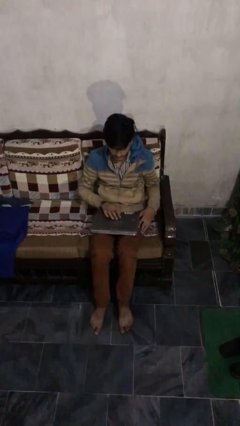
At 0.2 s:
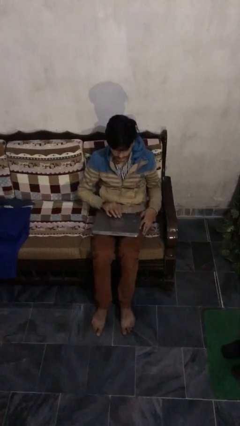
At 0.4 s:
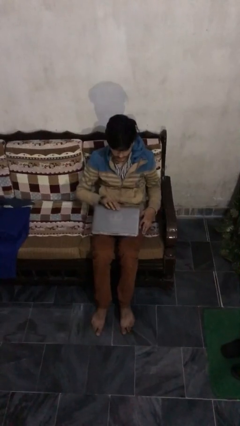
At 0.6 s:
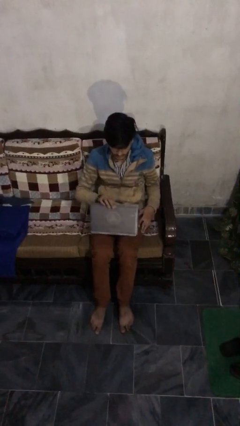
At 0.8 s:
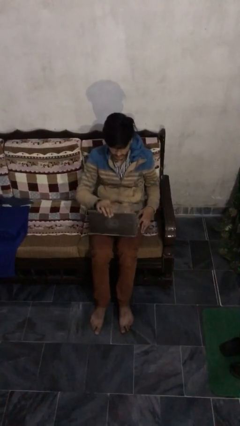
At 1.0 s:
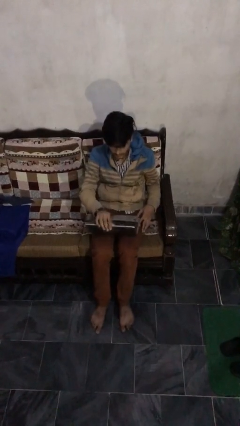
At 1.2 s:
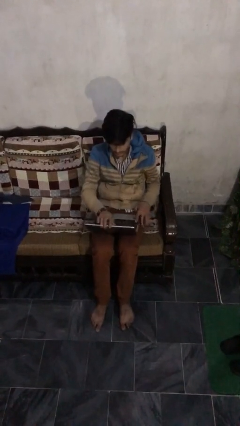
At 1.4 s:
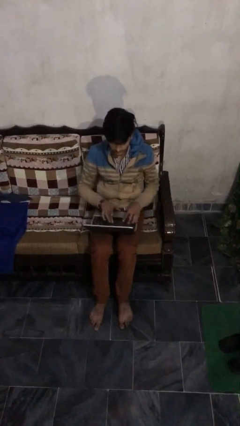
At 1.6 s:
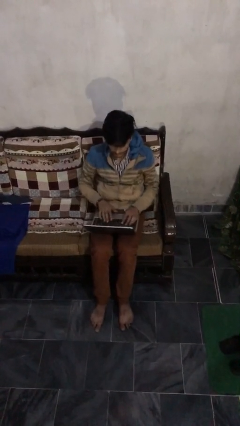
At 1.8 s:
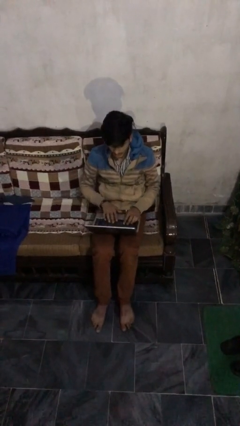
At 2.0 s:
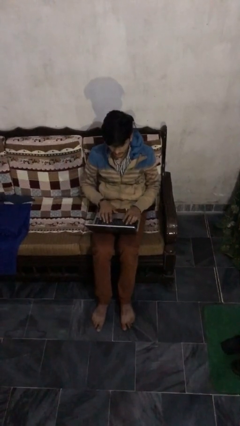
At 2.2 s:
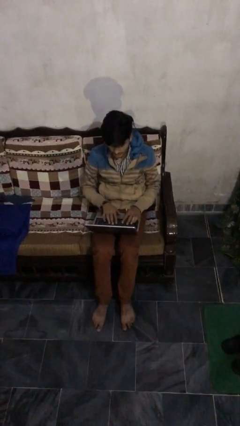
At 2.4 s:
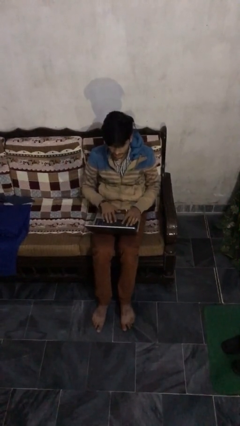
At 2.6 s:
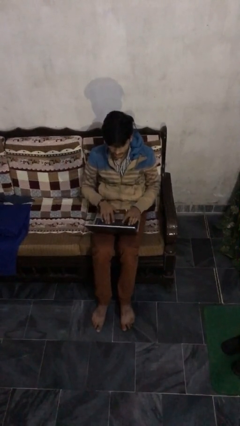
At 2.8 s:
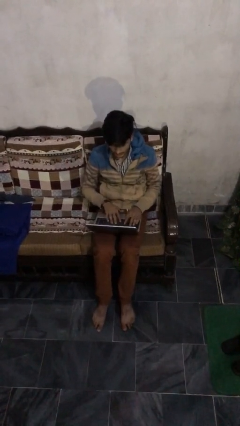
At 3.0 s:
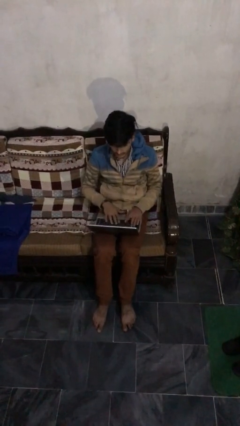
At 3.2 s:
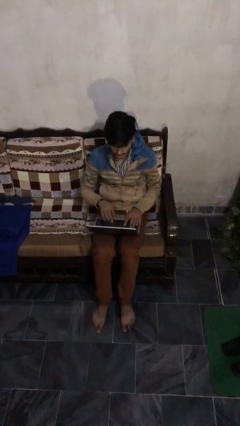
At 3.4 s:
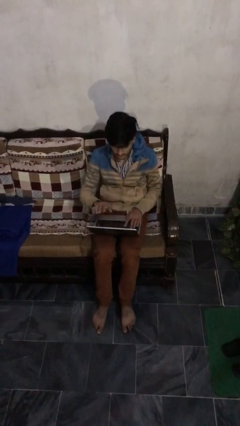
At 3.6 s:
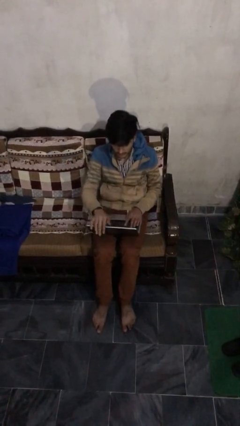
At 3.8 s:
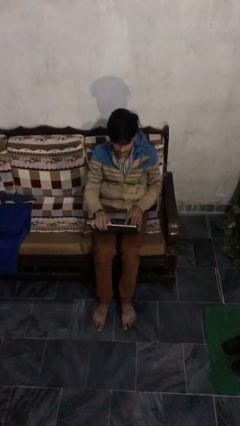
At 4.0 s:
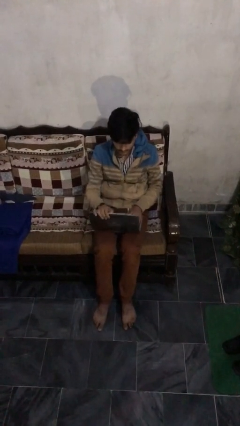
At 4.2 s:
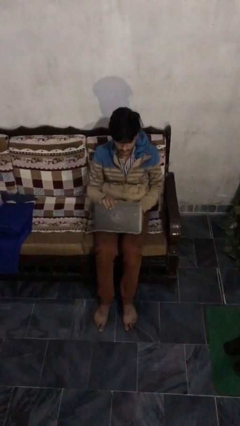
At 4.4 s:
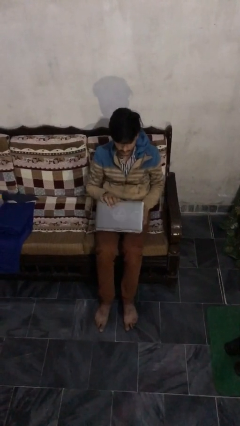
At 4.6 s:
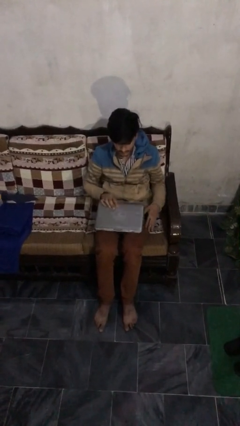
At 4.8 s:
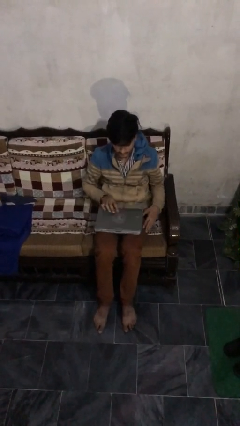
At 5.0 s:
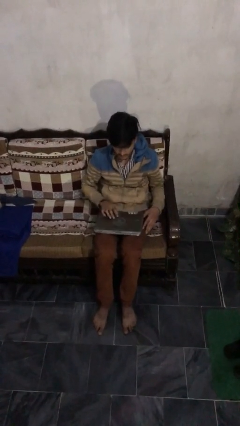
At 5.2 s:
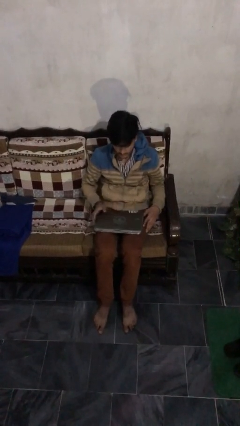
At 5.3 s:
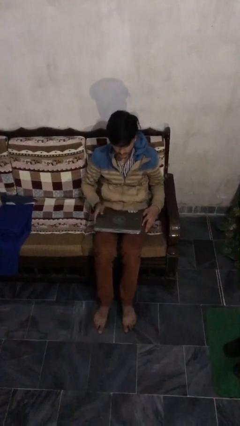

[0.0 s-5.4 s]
person interacts with laptop

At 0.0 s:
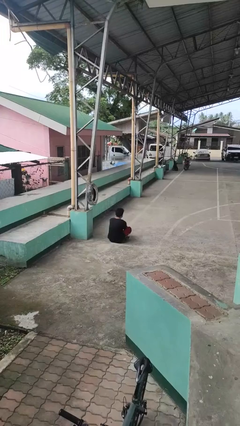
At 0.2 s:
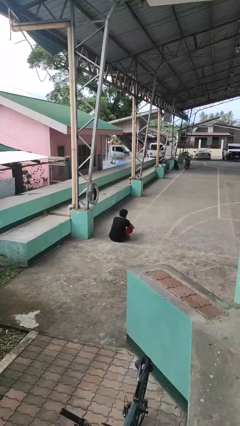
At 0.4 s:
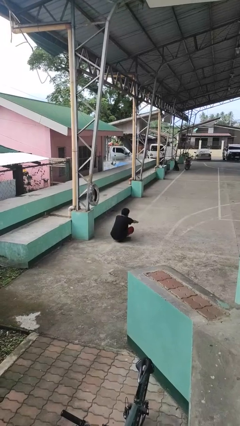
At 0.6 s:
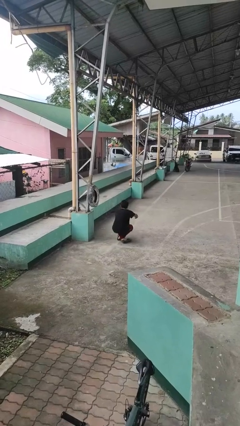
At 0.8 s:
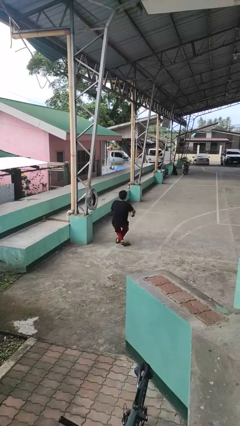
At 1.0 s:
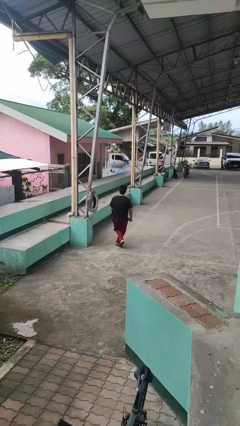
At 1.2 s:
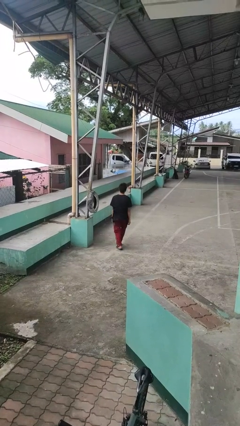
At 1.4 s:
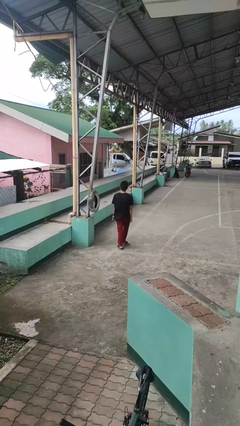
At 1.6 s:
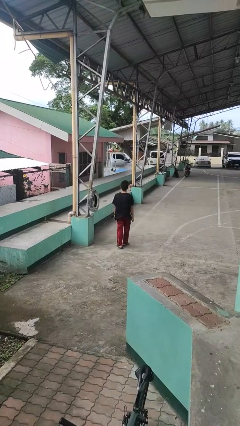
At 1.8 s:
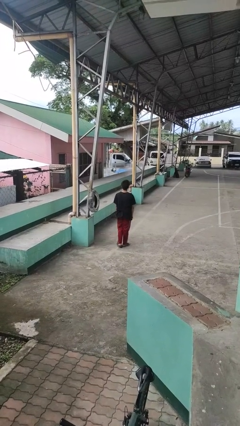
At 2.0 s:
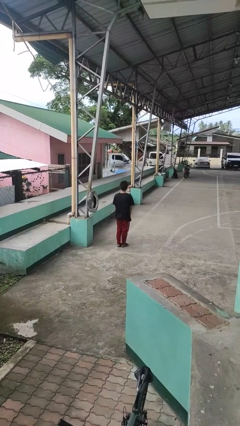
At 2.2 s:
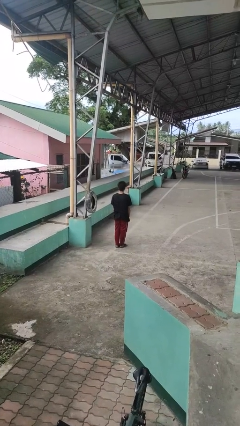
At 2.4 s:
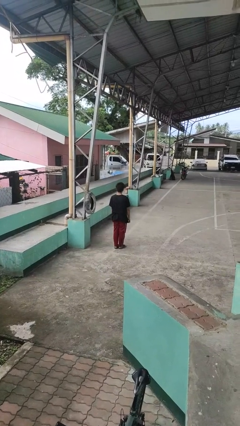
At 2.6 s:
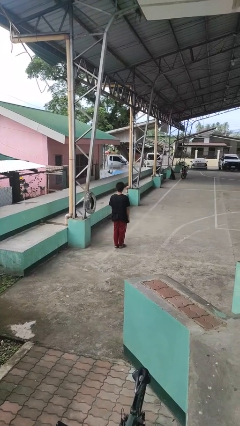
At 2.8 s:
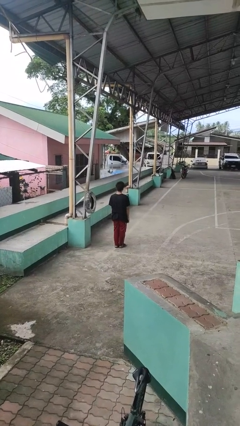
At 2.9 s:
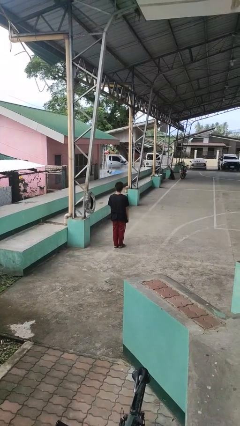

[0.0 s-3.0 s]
person stands up from floor

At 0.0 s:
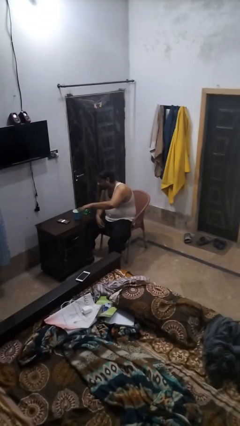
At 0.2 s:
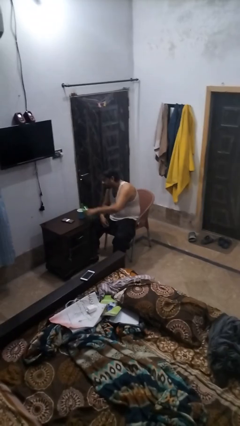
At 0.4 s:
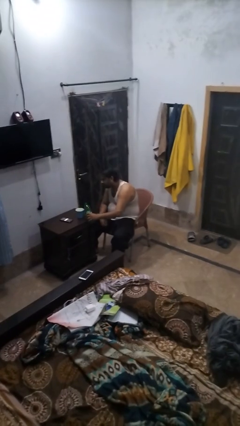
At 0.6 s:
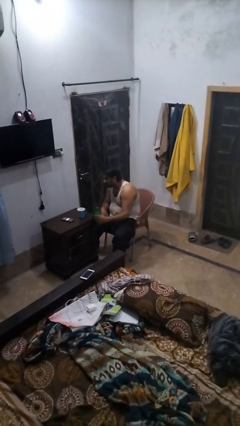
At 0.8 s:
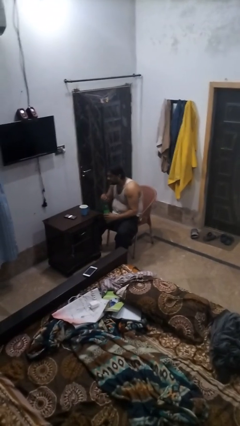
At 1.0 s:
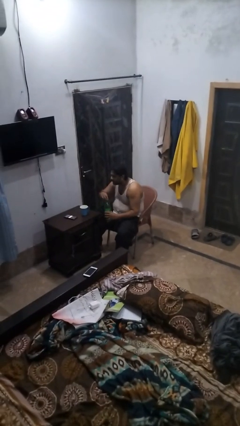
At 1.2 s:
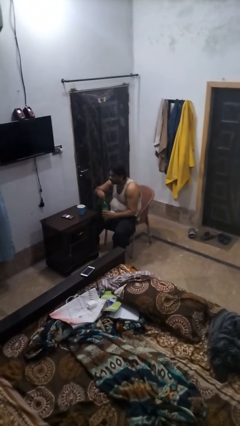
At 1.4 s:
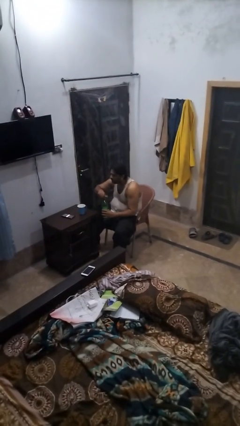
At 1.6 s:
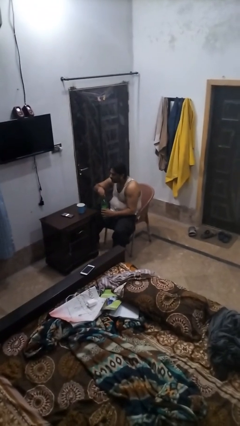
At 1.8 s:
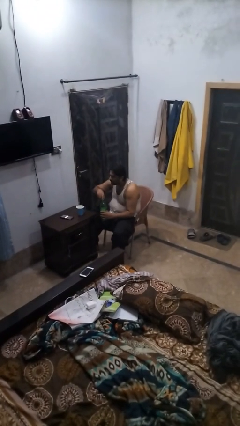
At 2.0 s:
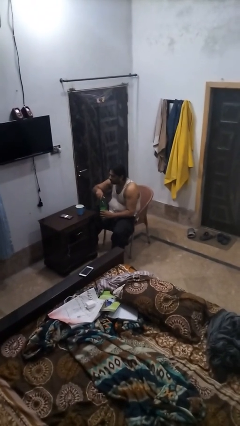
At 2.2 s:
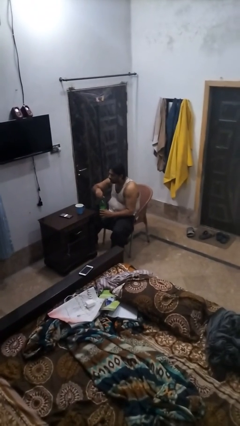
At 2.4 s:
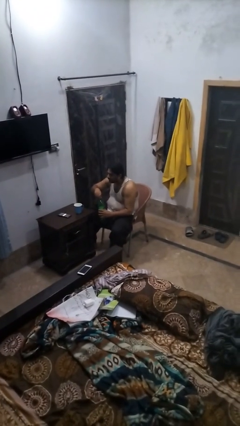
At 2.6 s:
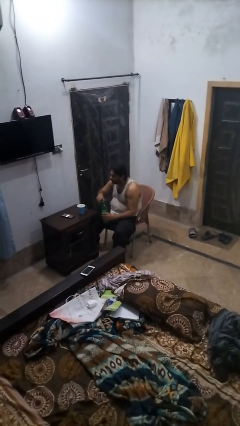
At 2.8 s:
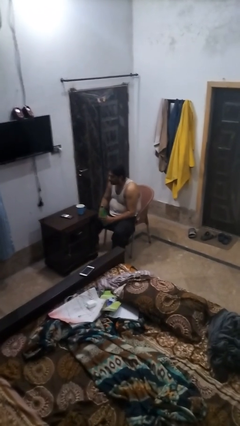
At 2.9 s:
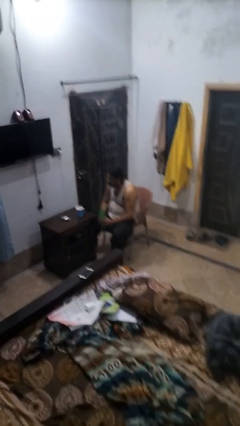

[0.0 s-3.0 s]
person screws lid to bottle

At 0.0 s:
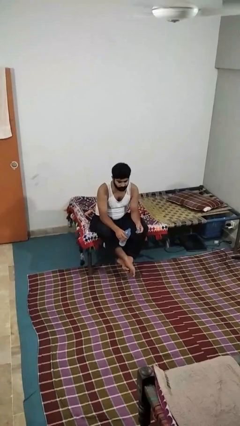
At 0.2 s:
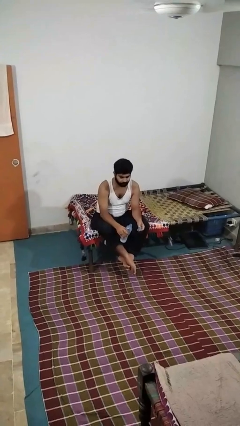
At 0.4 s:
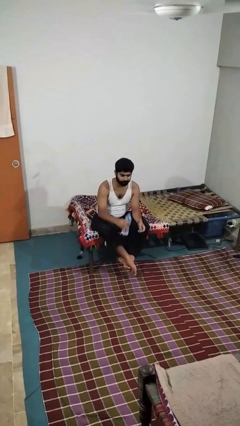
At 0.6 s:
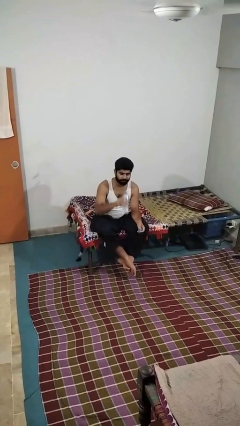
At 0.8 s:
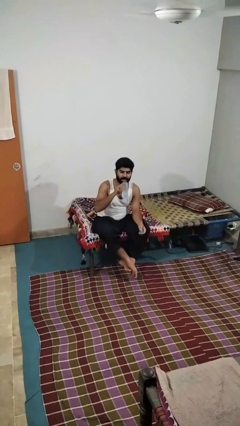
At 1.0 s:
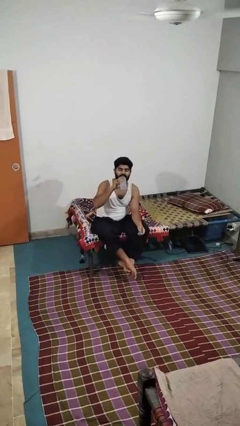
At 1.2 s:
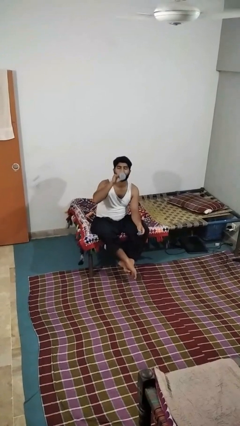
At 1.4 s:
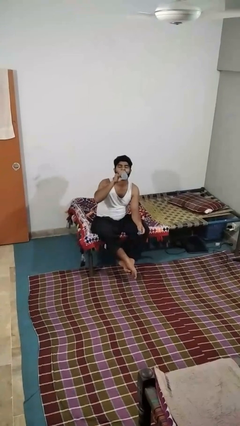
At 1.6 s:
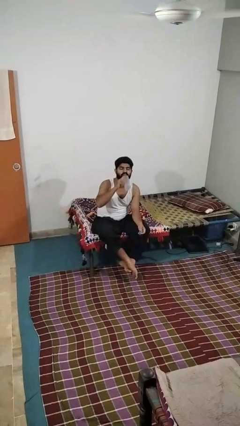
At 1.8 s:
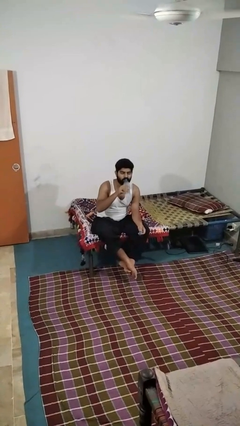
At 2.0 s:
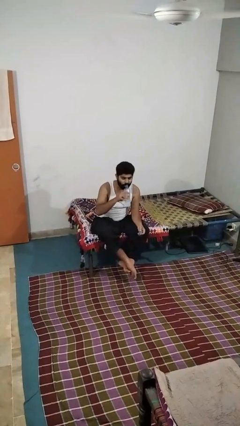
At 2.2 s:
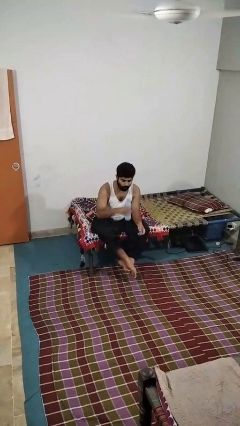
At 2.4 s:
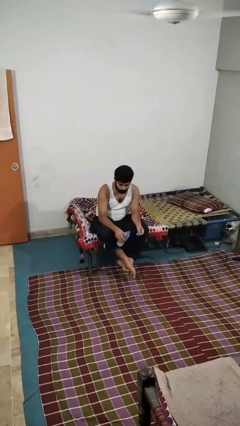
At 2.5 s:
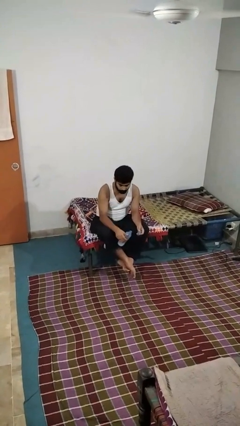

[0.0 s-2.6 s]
person drinks from bottle

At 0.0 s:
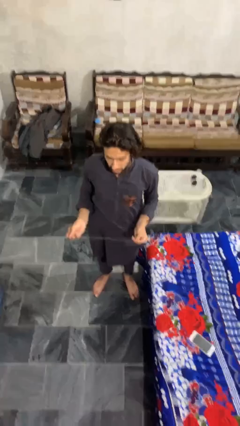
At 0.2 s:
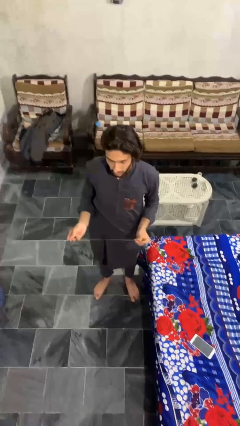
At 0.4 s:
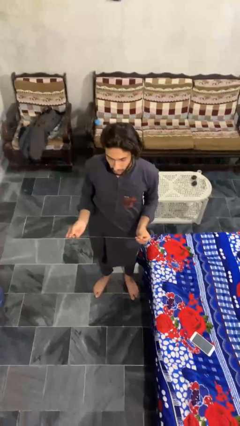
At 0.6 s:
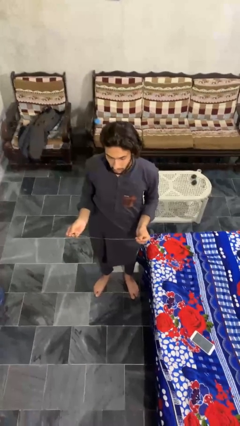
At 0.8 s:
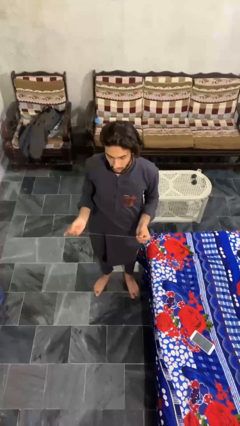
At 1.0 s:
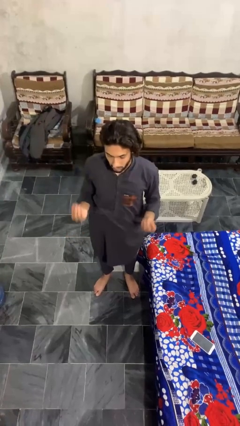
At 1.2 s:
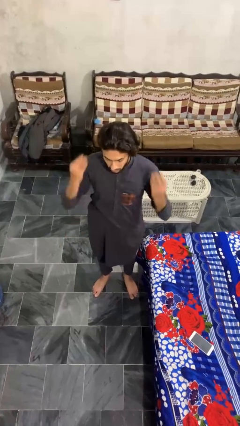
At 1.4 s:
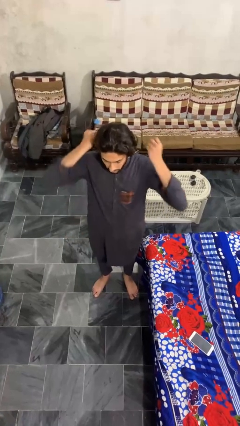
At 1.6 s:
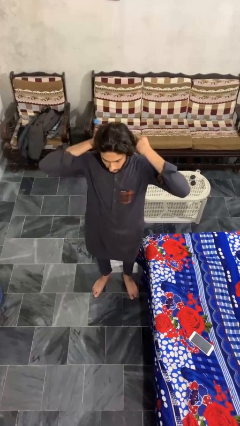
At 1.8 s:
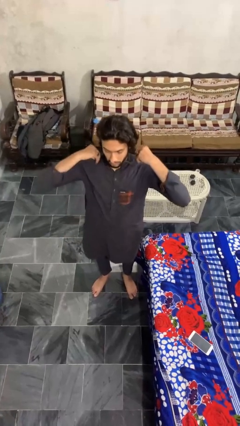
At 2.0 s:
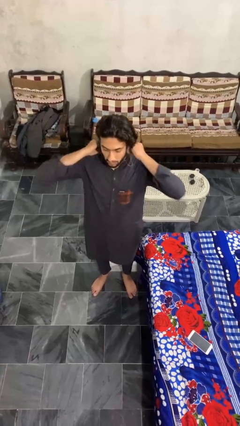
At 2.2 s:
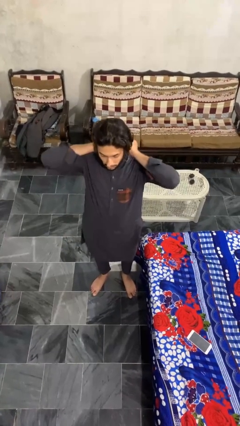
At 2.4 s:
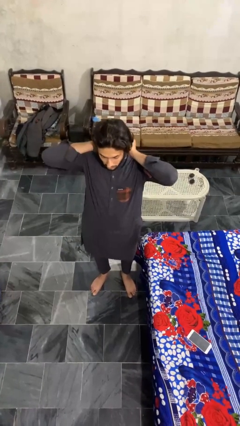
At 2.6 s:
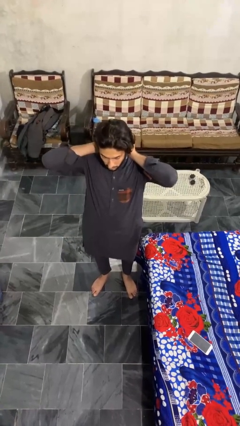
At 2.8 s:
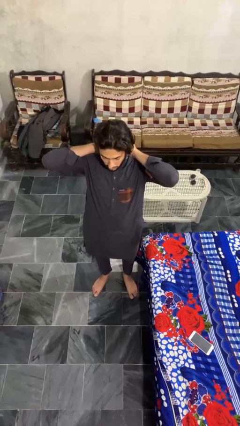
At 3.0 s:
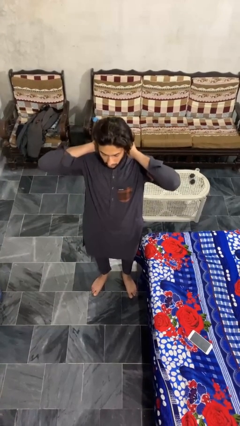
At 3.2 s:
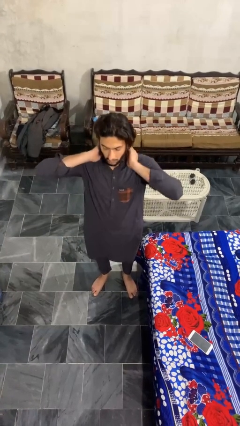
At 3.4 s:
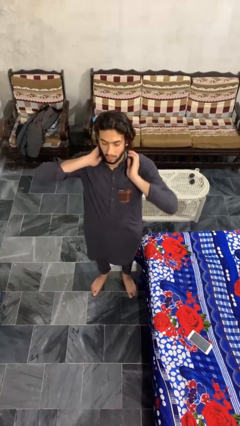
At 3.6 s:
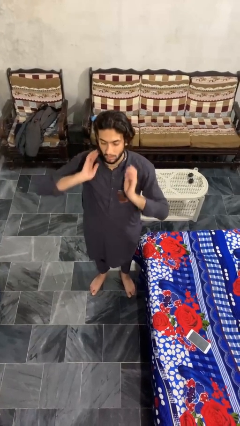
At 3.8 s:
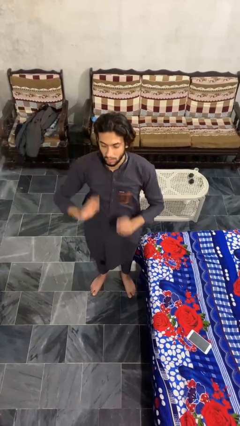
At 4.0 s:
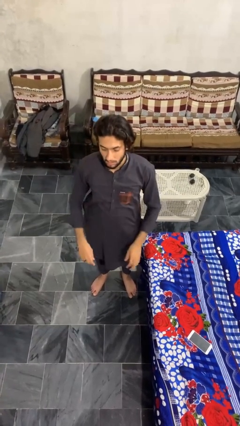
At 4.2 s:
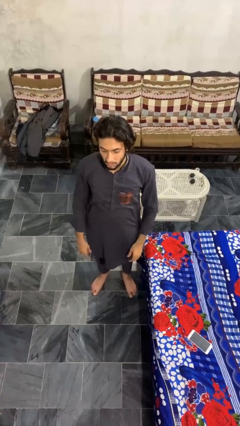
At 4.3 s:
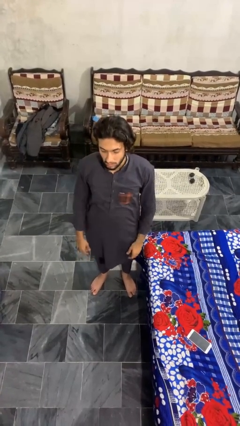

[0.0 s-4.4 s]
person puts on necklace
